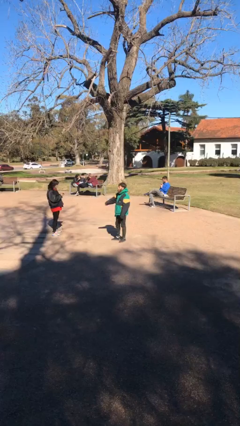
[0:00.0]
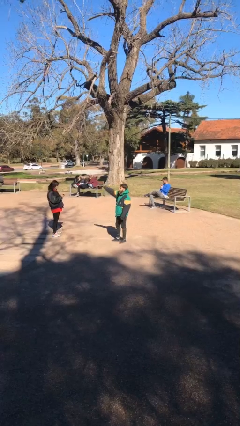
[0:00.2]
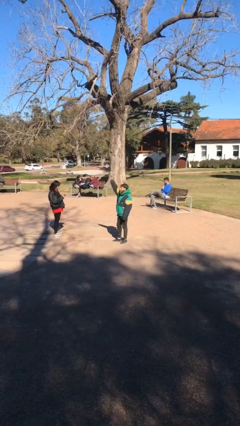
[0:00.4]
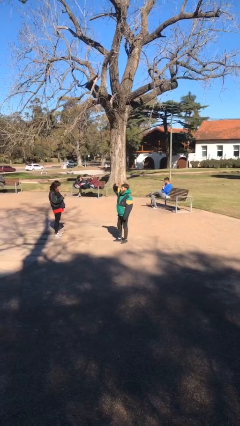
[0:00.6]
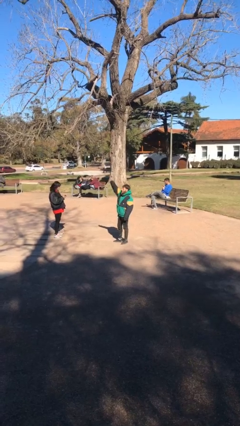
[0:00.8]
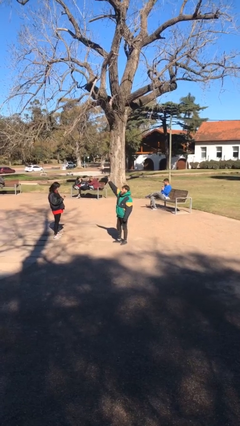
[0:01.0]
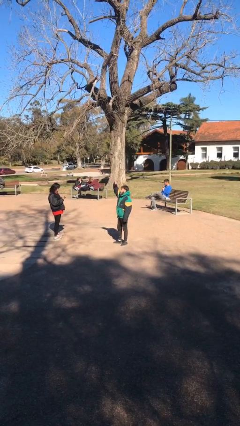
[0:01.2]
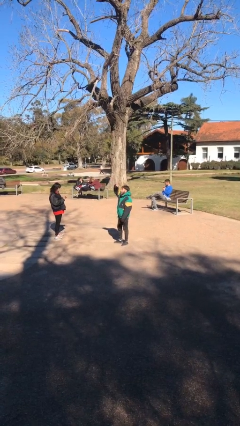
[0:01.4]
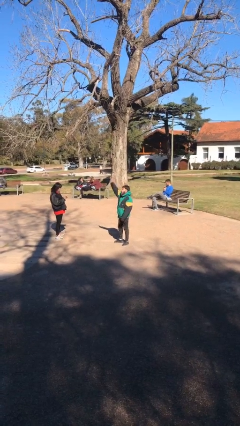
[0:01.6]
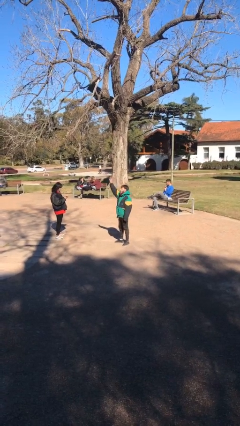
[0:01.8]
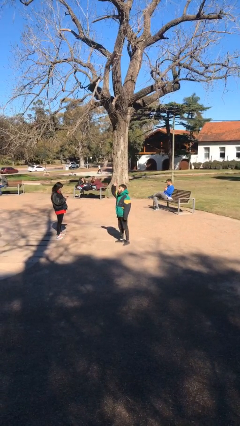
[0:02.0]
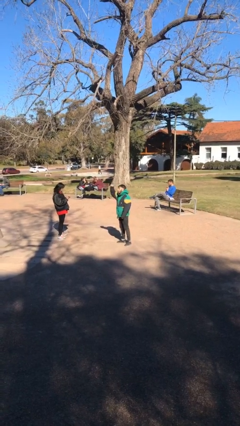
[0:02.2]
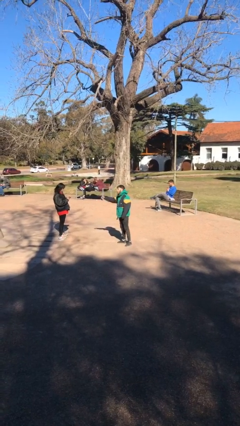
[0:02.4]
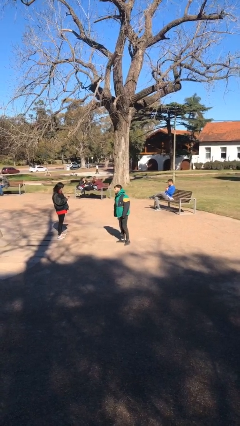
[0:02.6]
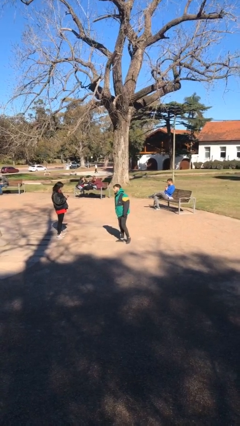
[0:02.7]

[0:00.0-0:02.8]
person waves at person

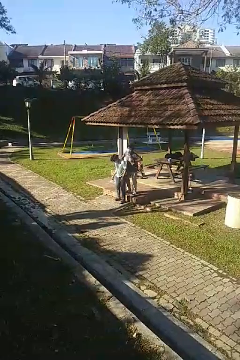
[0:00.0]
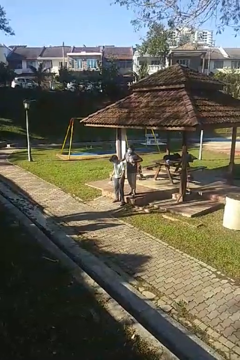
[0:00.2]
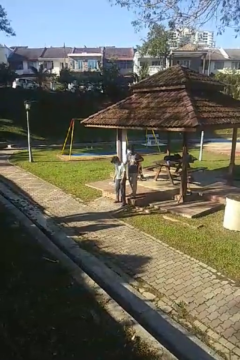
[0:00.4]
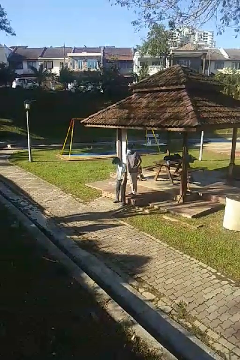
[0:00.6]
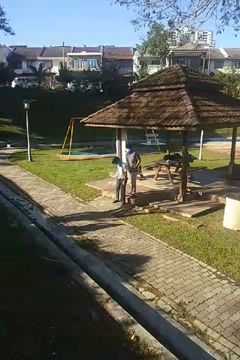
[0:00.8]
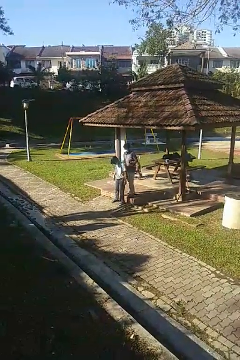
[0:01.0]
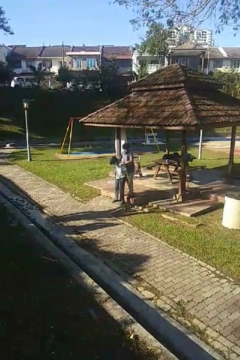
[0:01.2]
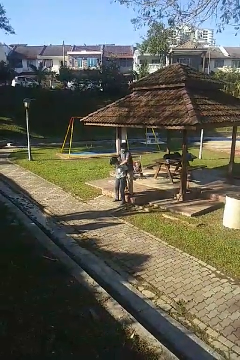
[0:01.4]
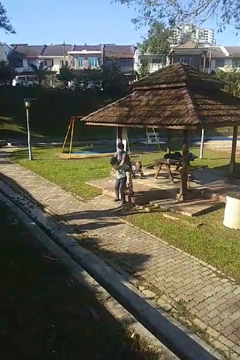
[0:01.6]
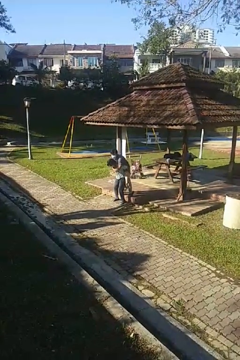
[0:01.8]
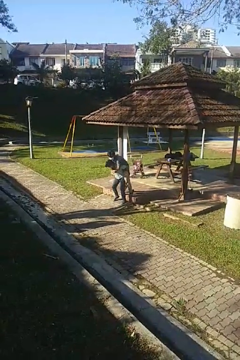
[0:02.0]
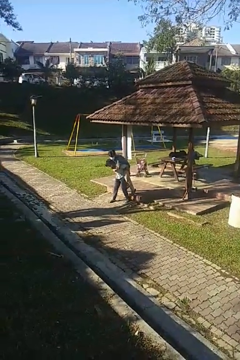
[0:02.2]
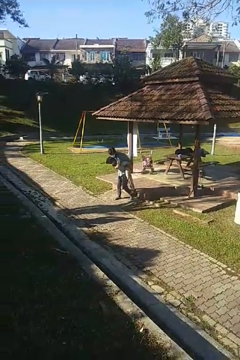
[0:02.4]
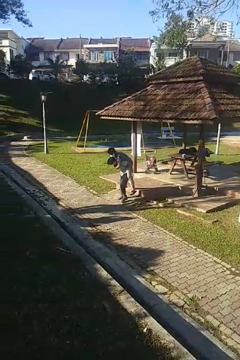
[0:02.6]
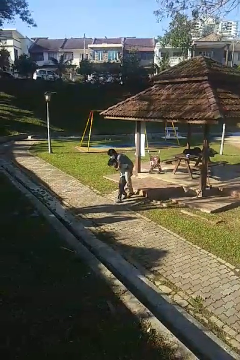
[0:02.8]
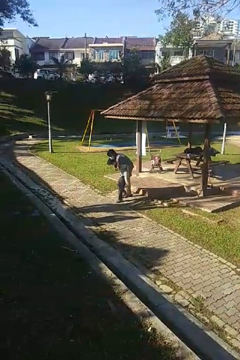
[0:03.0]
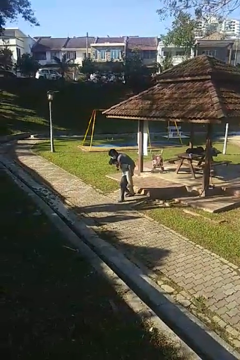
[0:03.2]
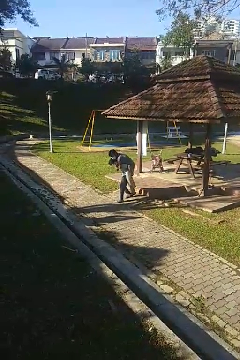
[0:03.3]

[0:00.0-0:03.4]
person carries person over shoulder

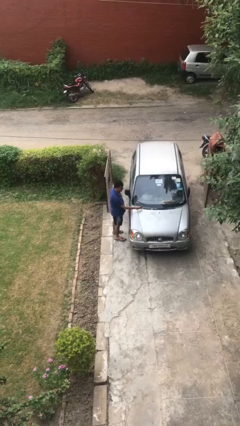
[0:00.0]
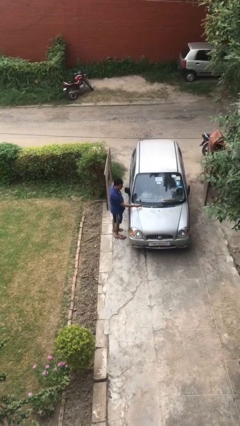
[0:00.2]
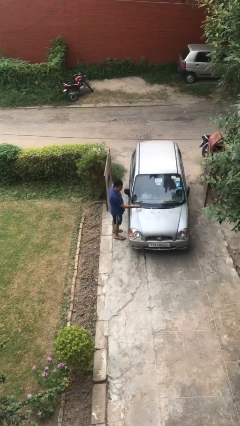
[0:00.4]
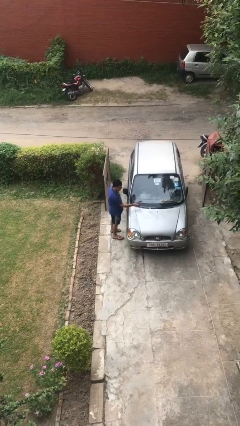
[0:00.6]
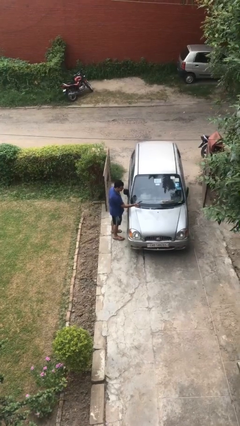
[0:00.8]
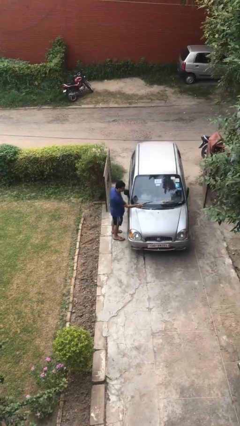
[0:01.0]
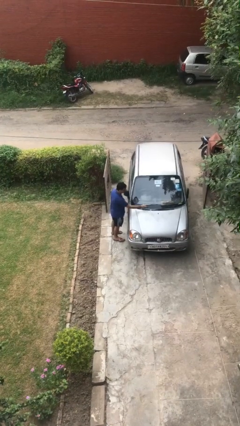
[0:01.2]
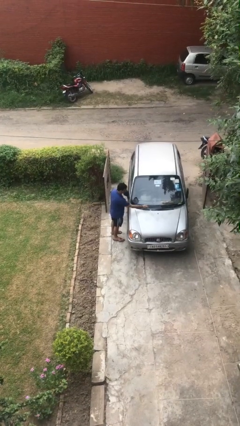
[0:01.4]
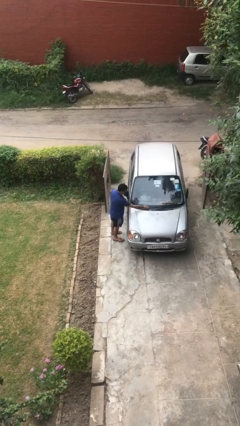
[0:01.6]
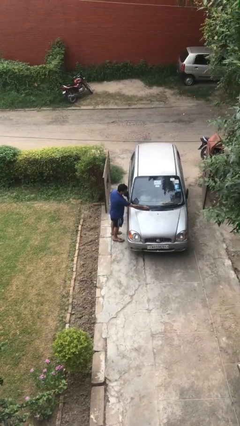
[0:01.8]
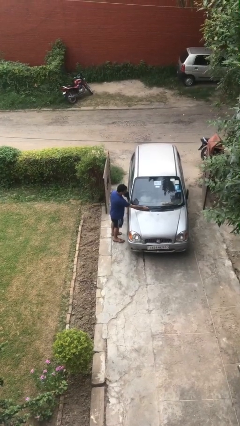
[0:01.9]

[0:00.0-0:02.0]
person flips down car wipers

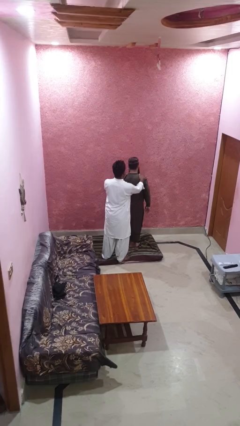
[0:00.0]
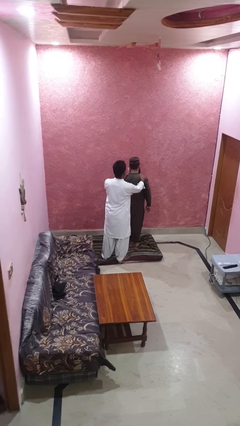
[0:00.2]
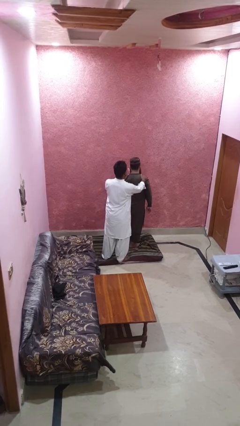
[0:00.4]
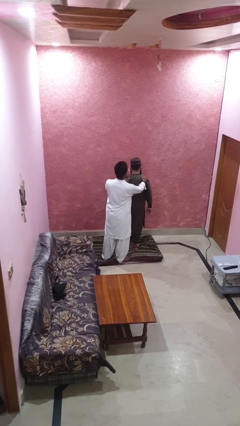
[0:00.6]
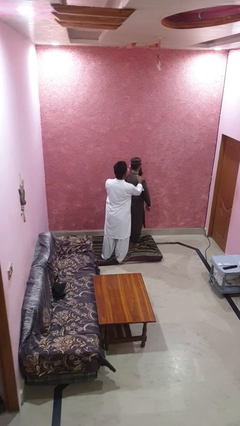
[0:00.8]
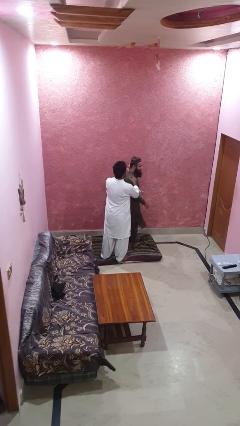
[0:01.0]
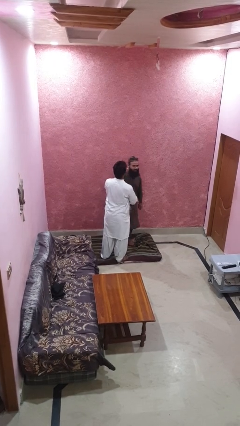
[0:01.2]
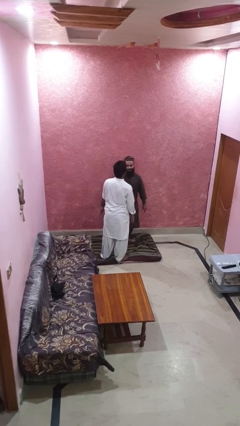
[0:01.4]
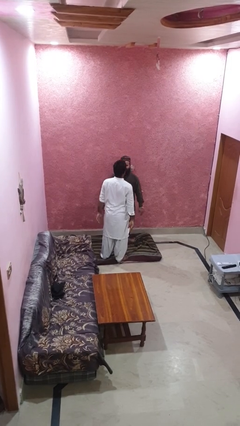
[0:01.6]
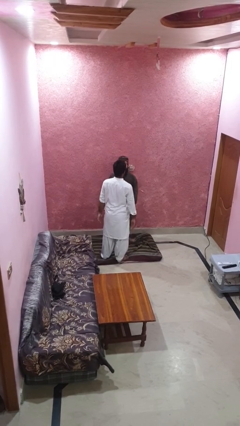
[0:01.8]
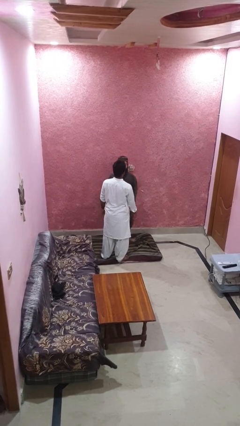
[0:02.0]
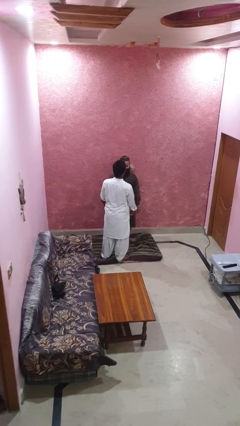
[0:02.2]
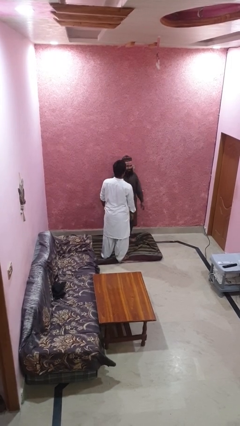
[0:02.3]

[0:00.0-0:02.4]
person spins person around

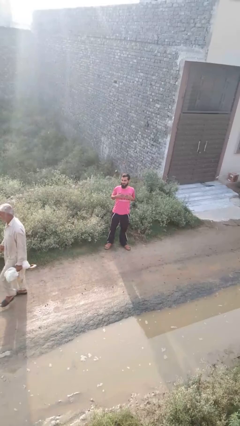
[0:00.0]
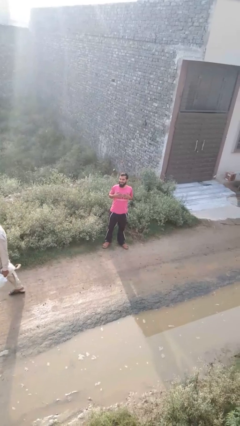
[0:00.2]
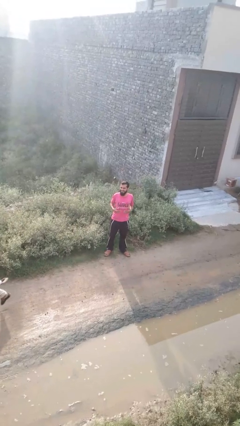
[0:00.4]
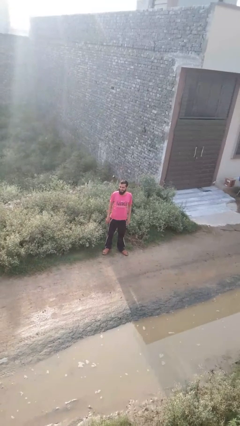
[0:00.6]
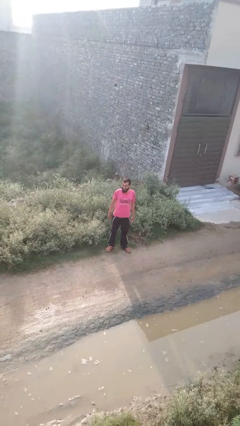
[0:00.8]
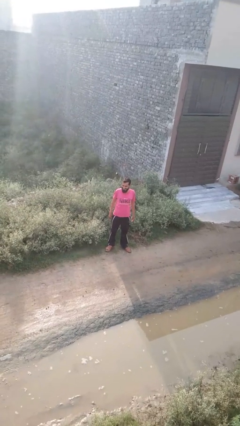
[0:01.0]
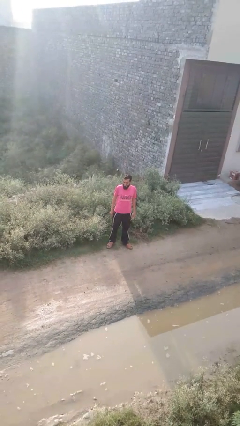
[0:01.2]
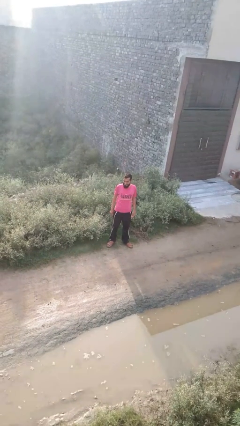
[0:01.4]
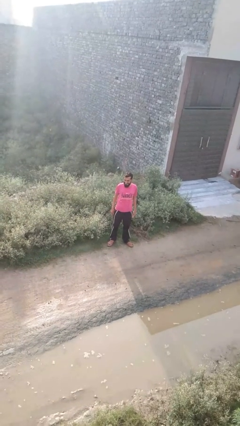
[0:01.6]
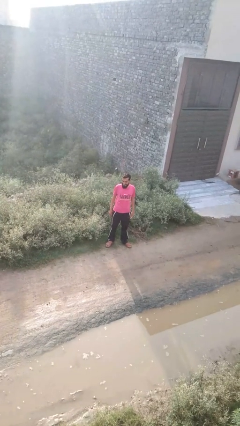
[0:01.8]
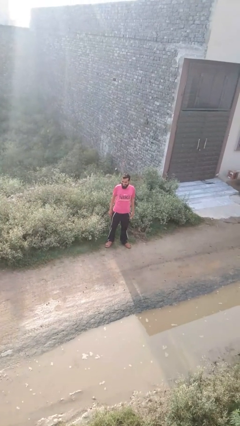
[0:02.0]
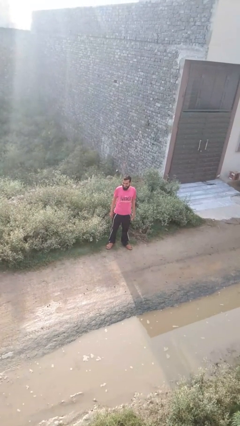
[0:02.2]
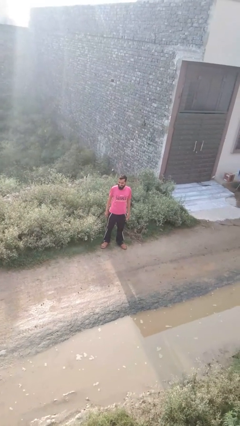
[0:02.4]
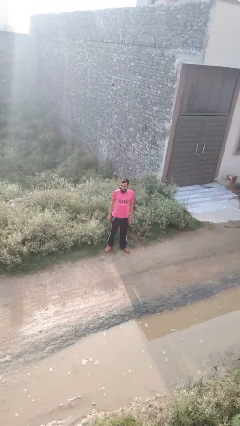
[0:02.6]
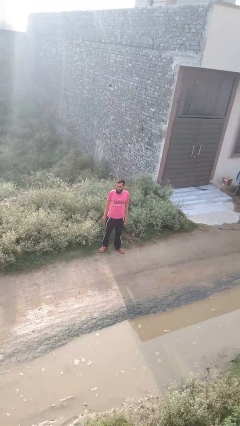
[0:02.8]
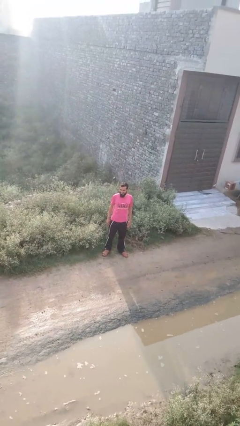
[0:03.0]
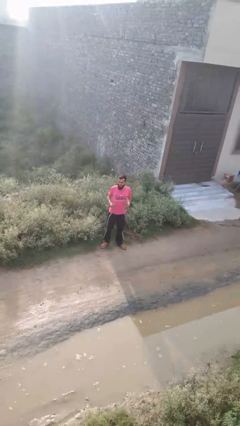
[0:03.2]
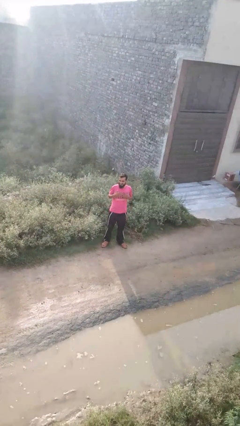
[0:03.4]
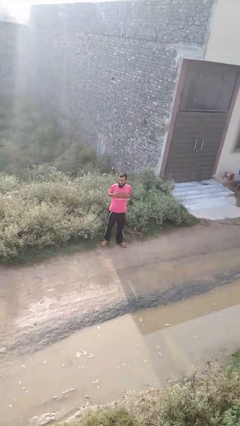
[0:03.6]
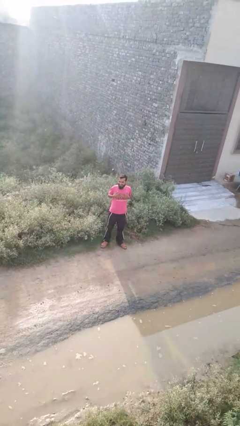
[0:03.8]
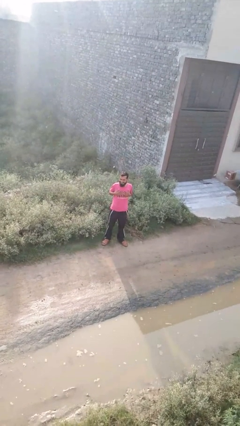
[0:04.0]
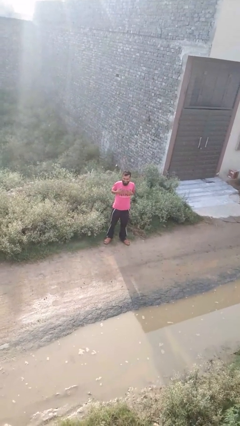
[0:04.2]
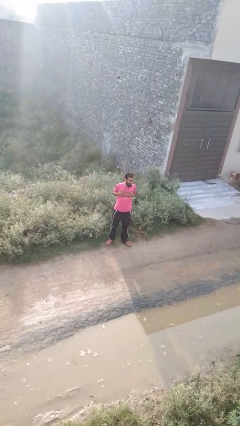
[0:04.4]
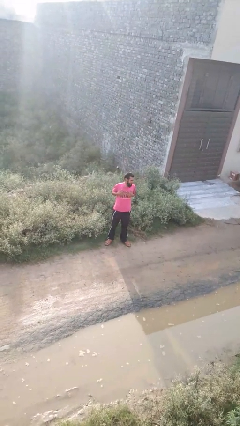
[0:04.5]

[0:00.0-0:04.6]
person drums on chest

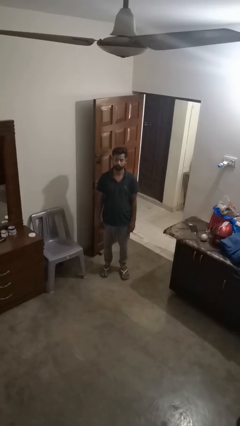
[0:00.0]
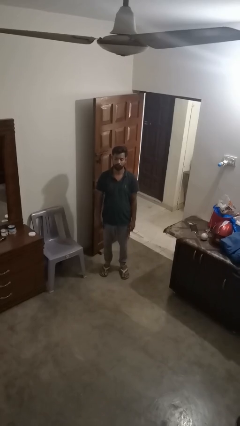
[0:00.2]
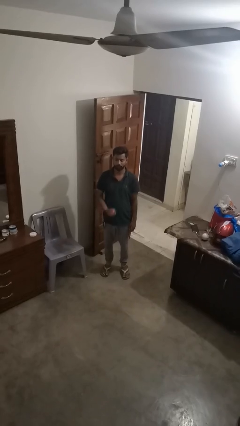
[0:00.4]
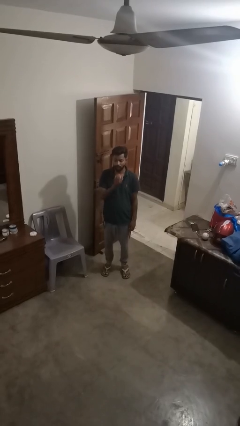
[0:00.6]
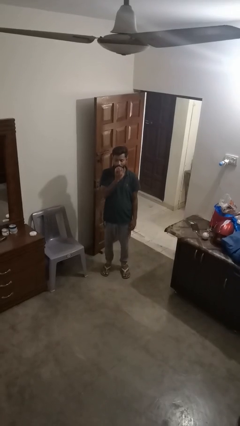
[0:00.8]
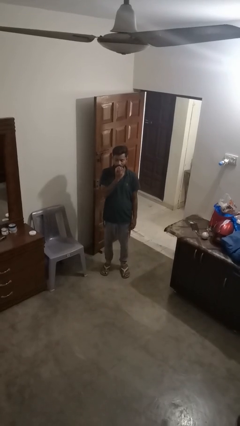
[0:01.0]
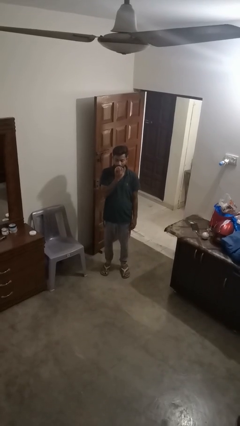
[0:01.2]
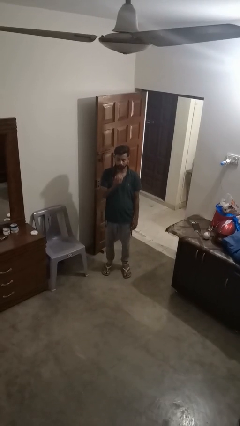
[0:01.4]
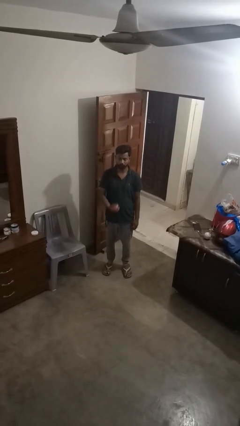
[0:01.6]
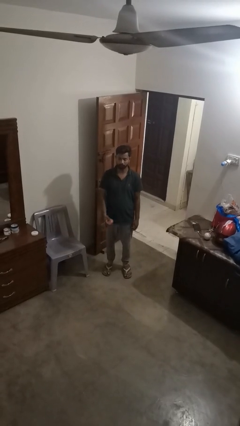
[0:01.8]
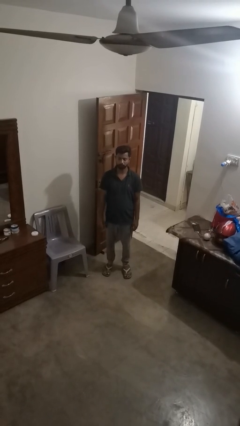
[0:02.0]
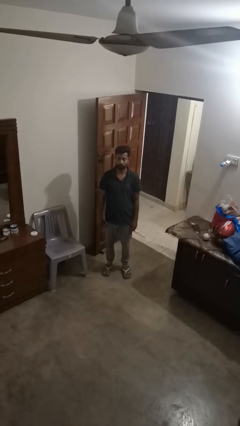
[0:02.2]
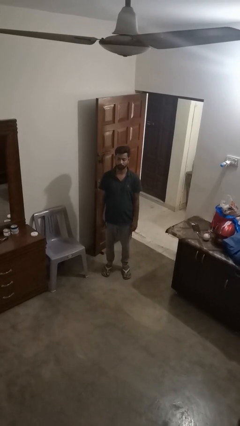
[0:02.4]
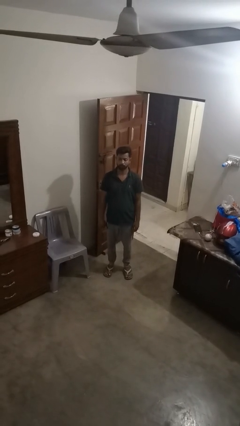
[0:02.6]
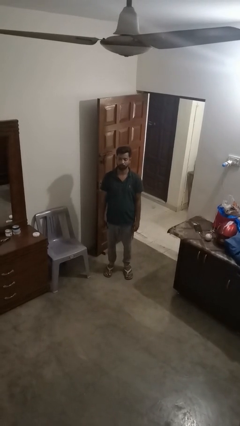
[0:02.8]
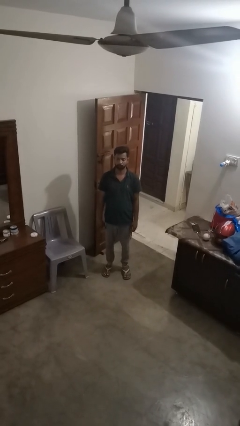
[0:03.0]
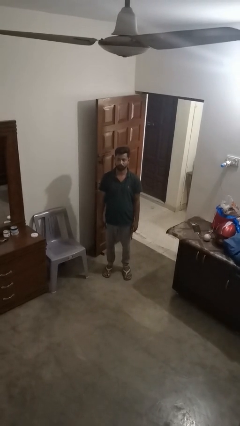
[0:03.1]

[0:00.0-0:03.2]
person eats apple
